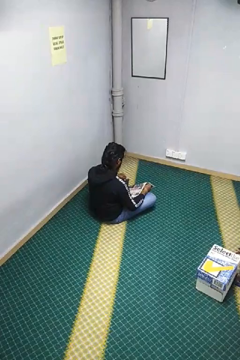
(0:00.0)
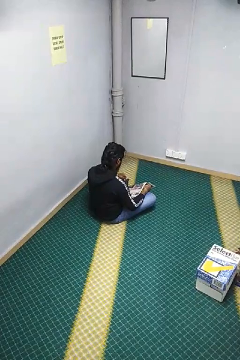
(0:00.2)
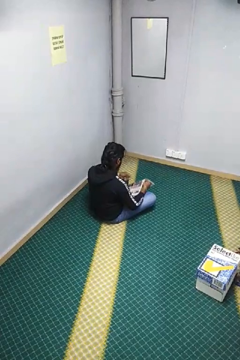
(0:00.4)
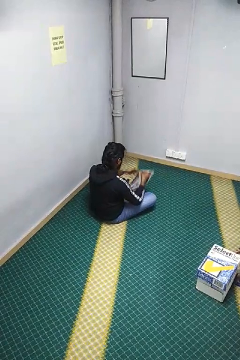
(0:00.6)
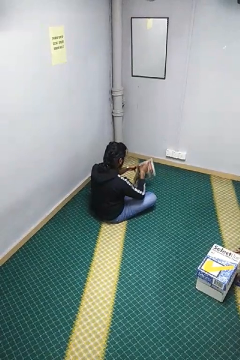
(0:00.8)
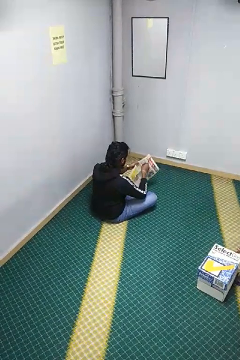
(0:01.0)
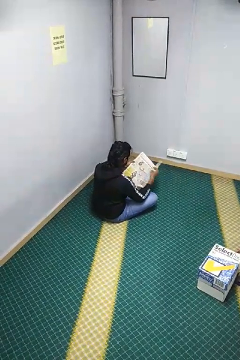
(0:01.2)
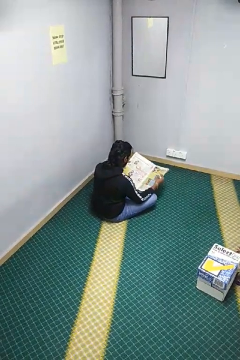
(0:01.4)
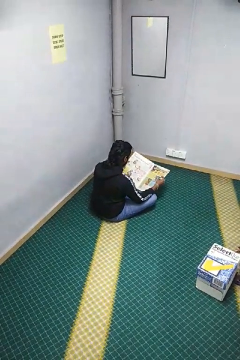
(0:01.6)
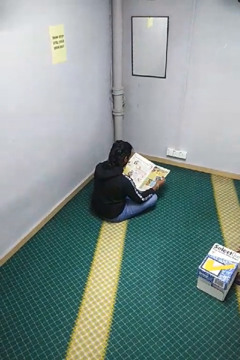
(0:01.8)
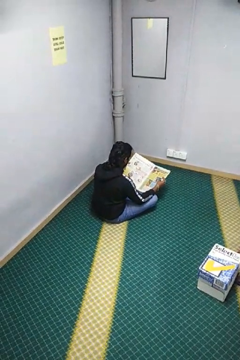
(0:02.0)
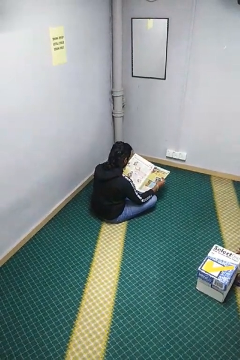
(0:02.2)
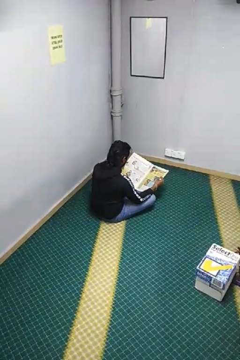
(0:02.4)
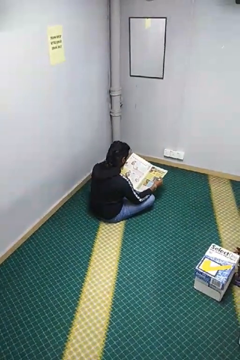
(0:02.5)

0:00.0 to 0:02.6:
person reads newspaper

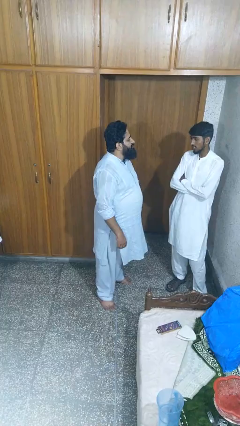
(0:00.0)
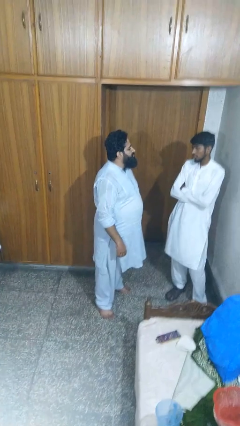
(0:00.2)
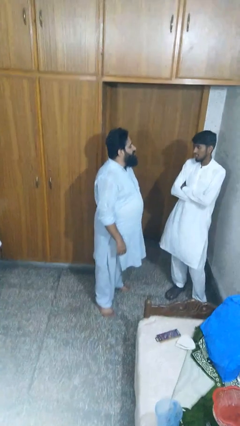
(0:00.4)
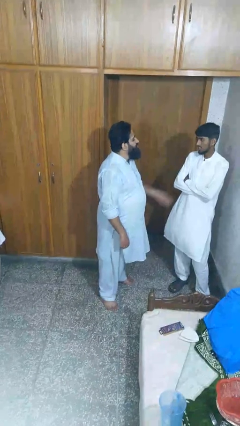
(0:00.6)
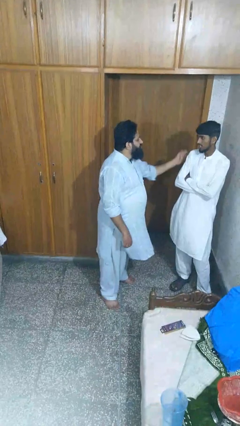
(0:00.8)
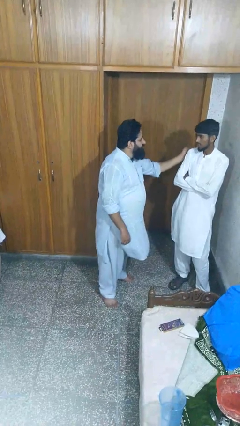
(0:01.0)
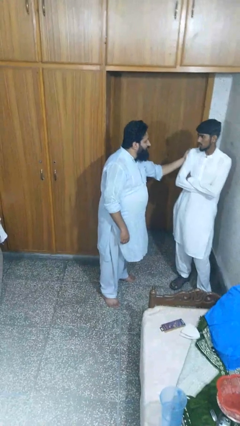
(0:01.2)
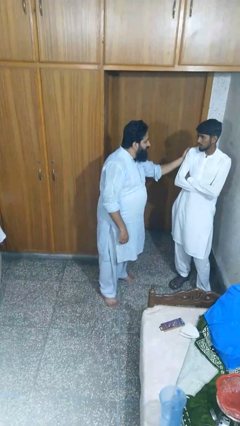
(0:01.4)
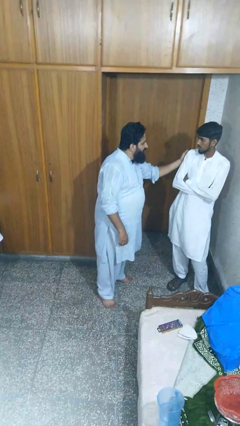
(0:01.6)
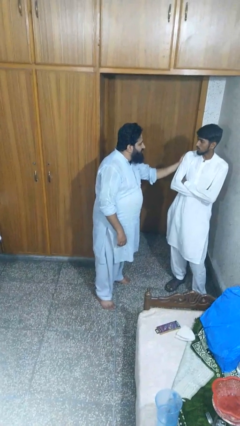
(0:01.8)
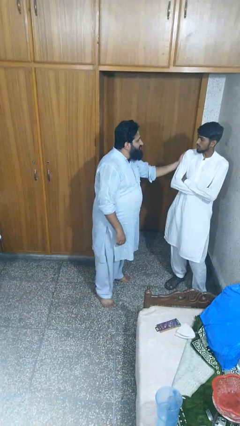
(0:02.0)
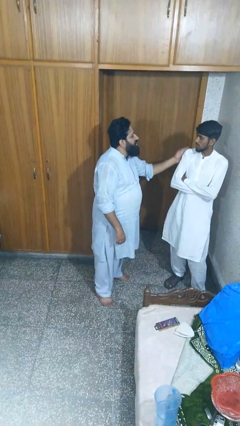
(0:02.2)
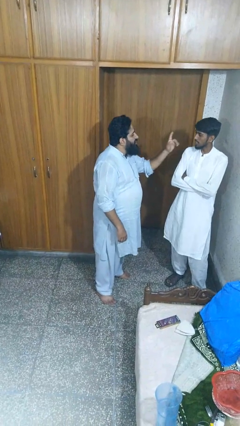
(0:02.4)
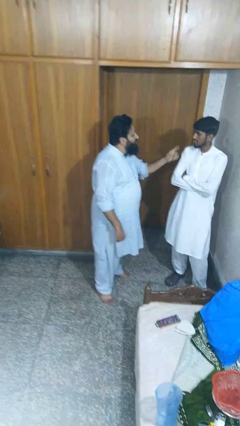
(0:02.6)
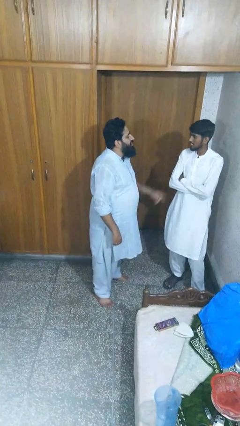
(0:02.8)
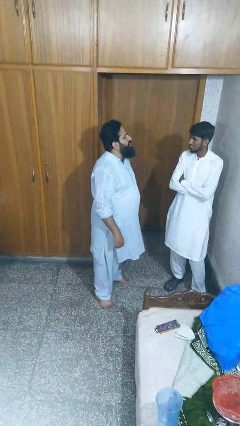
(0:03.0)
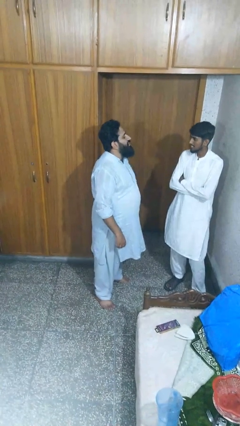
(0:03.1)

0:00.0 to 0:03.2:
person pounds shoulders of person

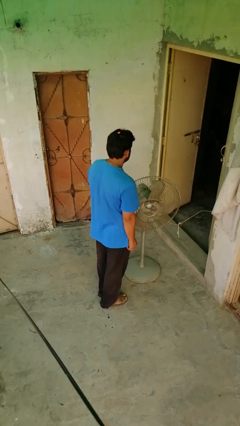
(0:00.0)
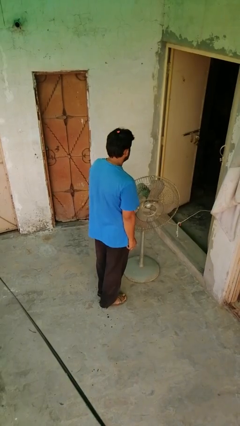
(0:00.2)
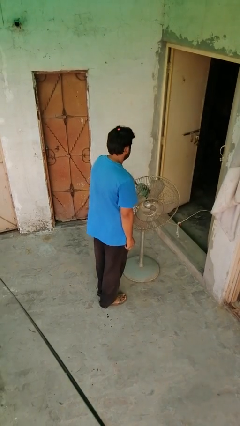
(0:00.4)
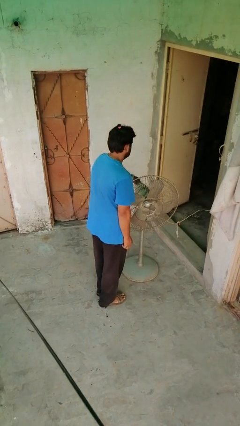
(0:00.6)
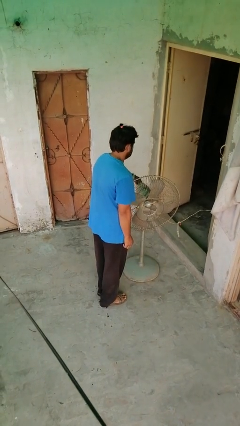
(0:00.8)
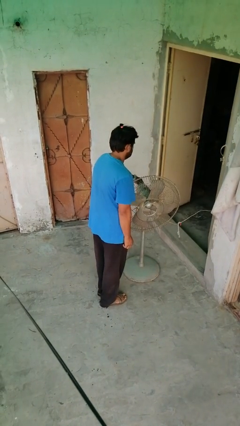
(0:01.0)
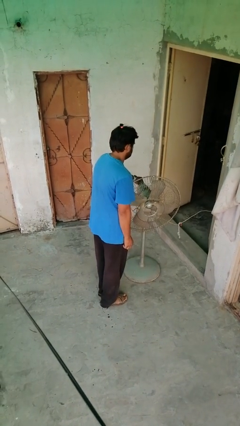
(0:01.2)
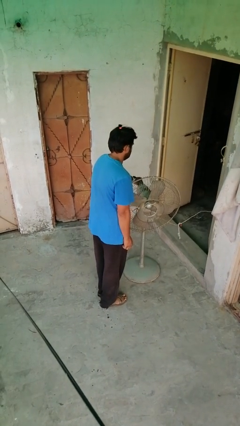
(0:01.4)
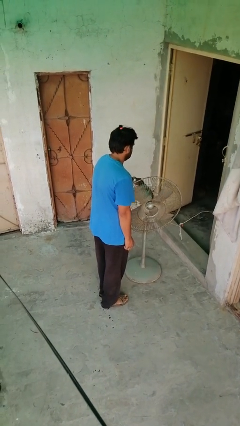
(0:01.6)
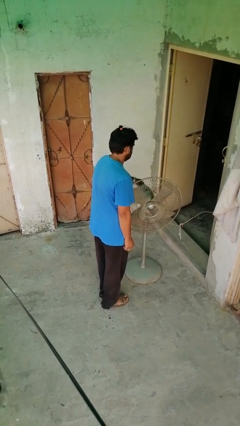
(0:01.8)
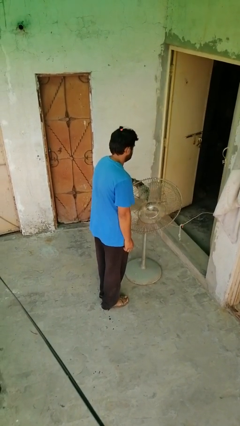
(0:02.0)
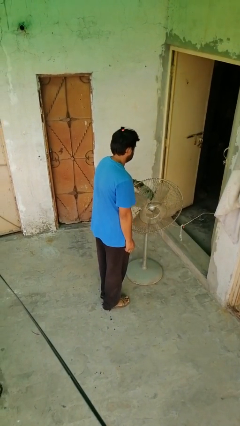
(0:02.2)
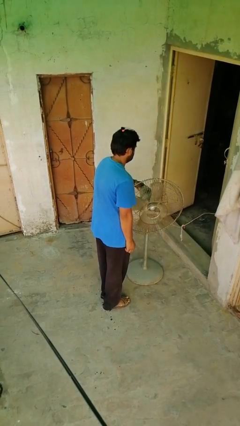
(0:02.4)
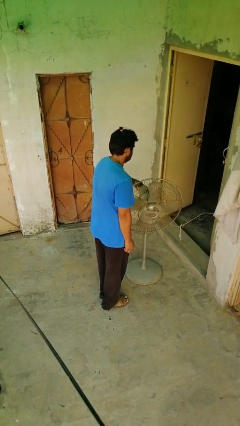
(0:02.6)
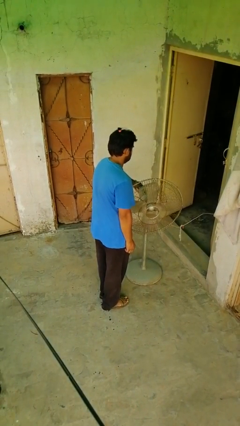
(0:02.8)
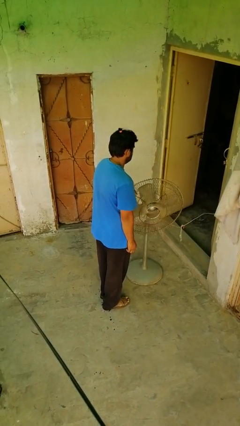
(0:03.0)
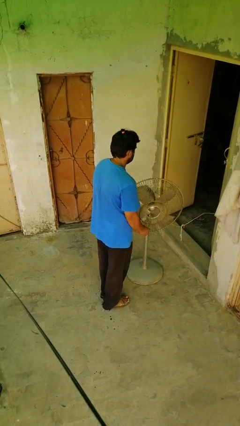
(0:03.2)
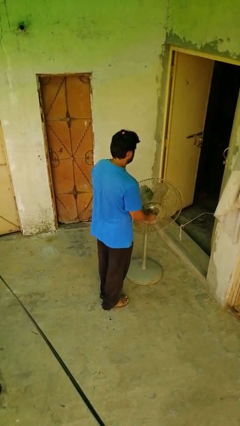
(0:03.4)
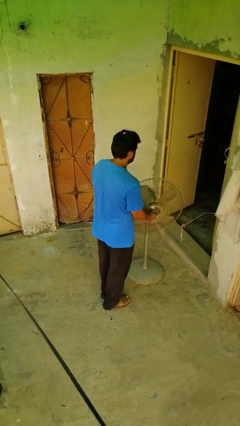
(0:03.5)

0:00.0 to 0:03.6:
person turns on fan

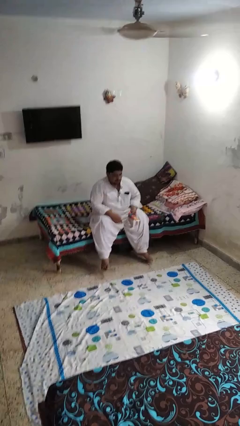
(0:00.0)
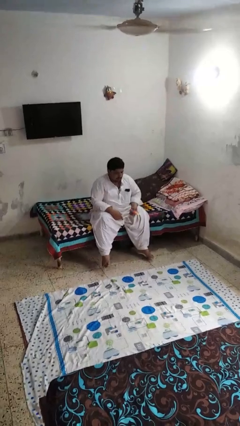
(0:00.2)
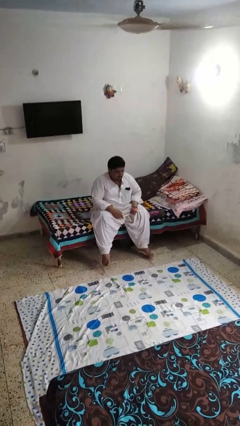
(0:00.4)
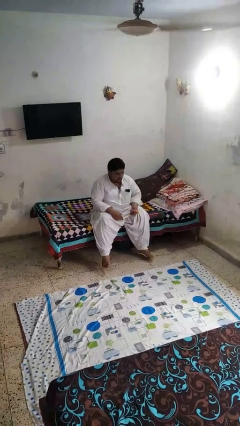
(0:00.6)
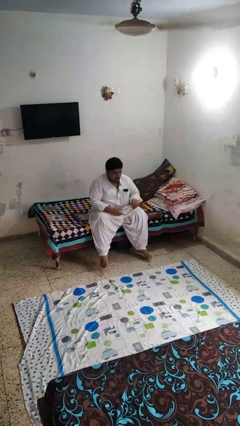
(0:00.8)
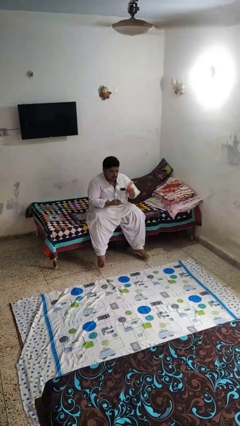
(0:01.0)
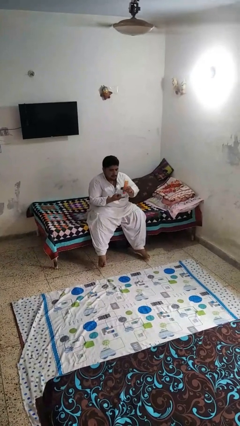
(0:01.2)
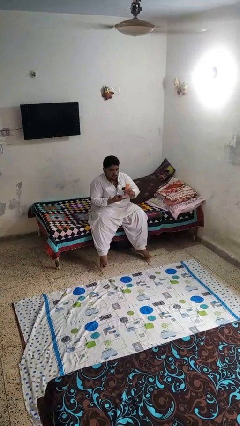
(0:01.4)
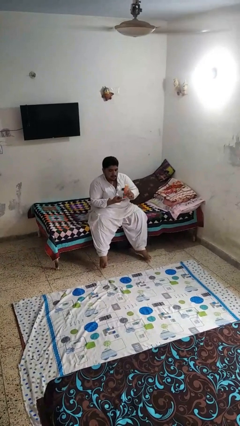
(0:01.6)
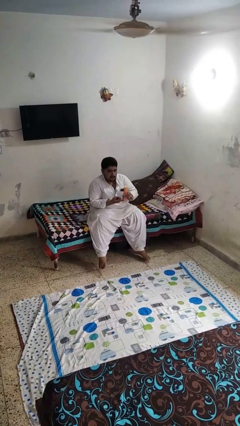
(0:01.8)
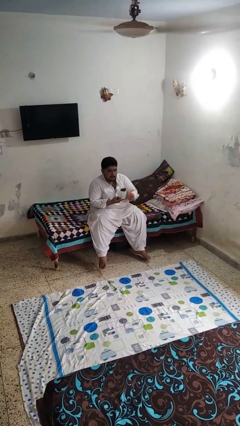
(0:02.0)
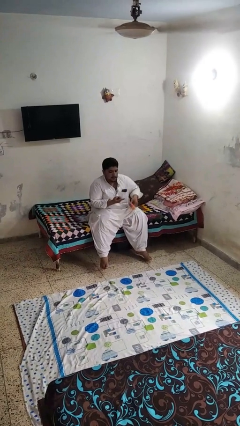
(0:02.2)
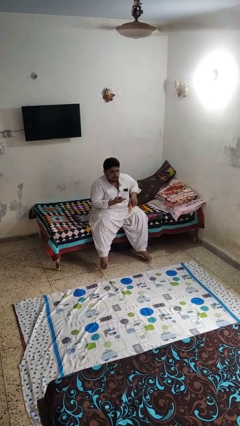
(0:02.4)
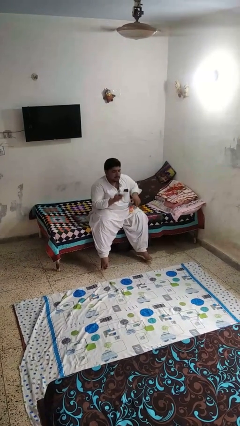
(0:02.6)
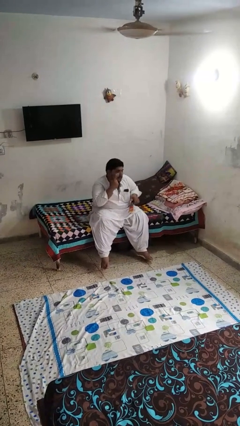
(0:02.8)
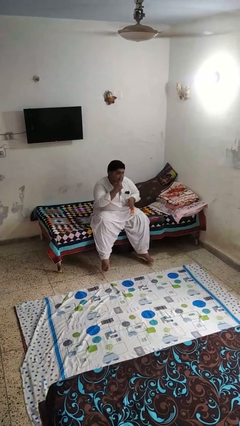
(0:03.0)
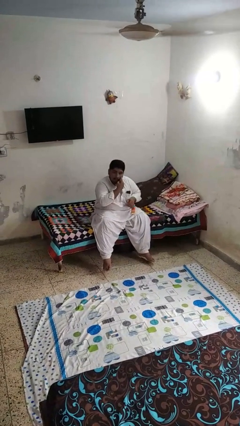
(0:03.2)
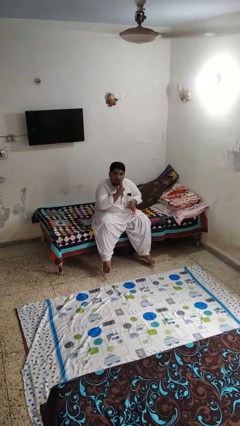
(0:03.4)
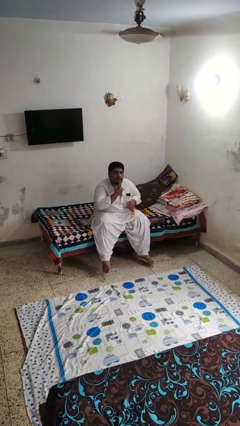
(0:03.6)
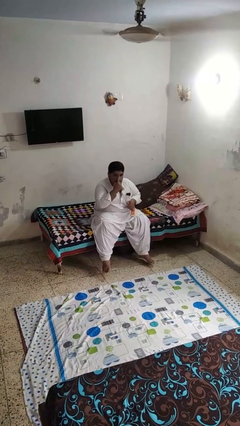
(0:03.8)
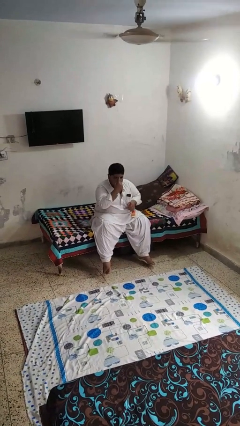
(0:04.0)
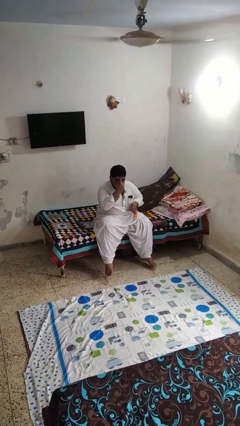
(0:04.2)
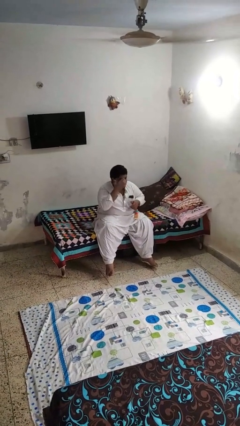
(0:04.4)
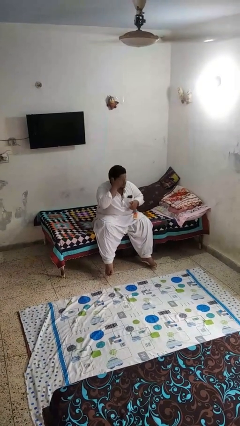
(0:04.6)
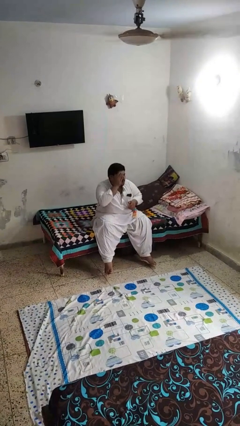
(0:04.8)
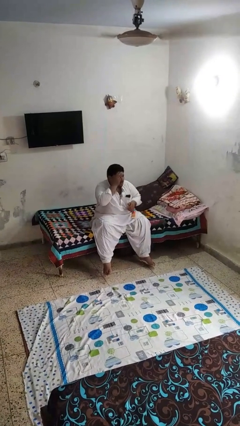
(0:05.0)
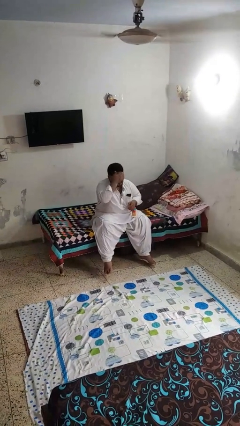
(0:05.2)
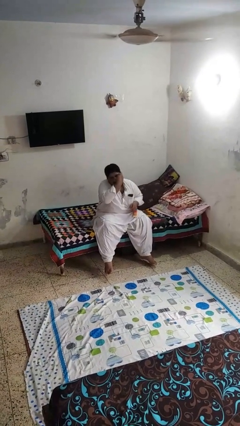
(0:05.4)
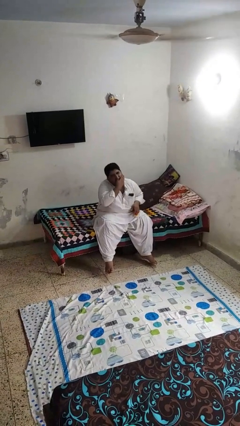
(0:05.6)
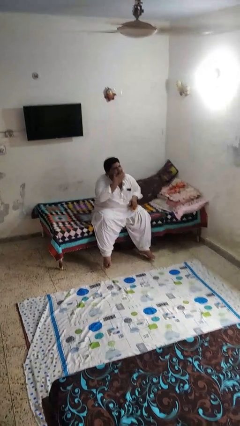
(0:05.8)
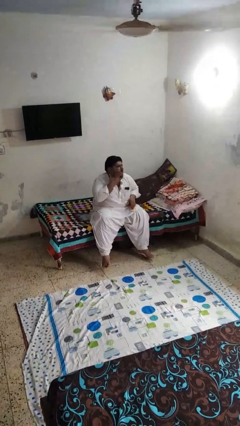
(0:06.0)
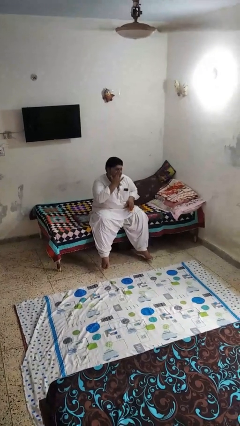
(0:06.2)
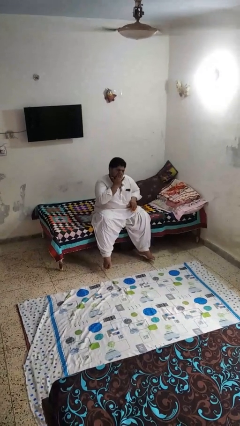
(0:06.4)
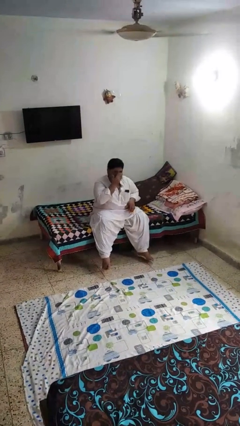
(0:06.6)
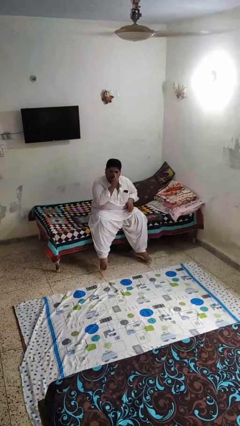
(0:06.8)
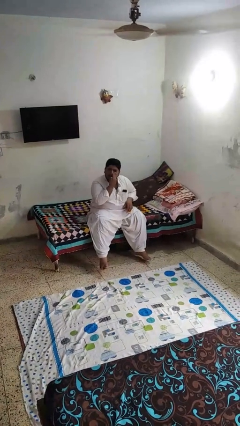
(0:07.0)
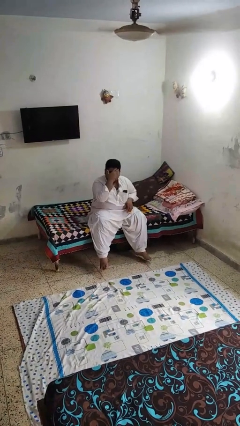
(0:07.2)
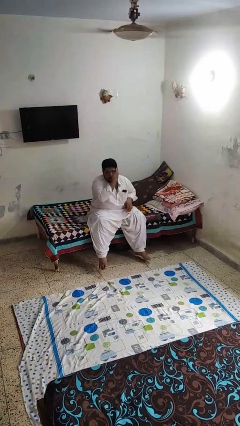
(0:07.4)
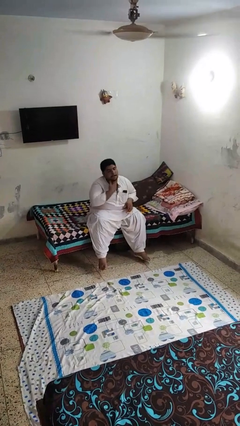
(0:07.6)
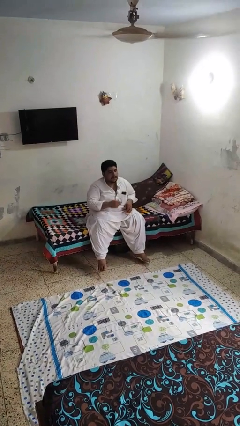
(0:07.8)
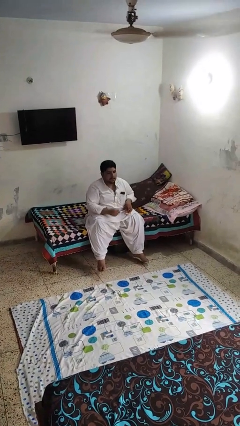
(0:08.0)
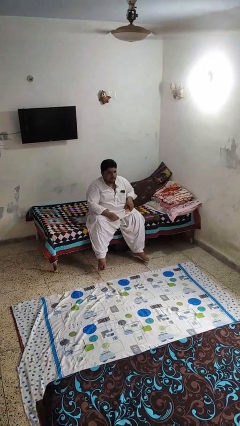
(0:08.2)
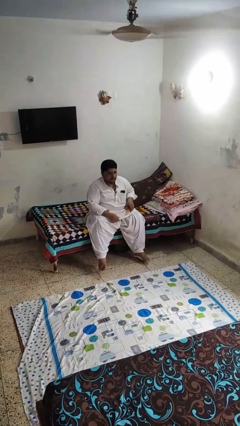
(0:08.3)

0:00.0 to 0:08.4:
person applies facial moisturizer

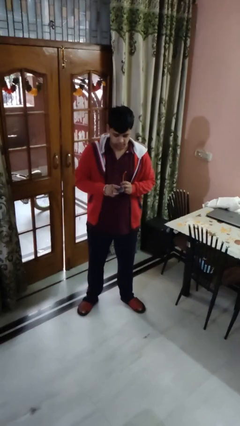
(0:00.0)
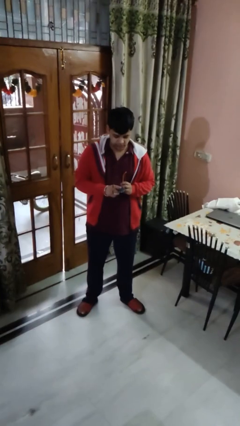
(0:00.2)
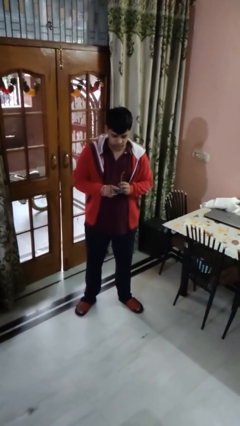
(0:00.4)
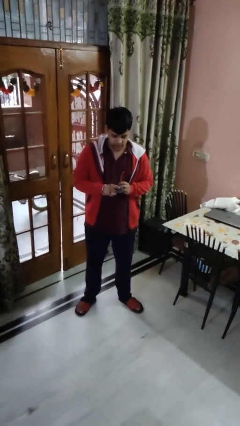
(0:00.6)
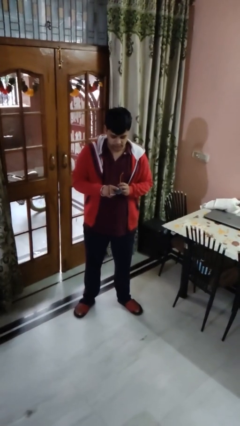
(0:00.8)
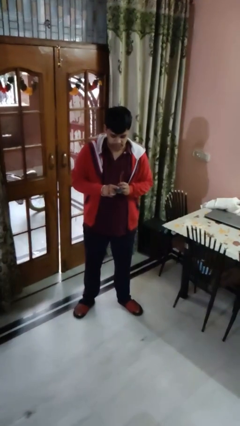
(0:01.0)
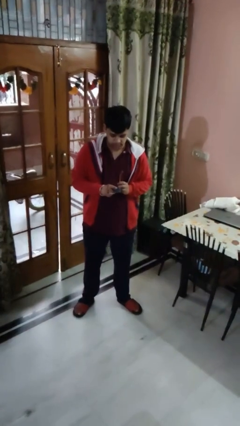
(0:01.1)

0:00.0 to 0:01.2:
person cleans eyeglasses
